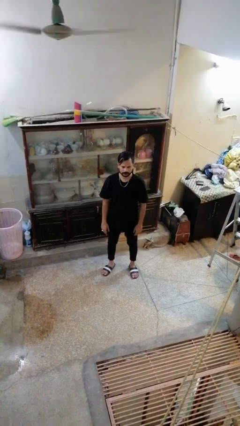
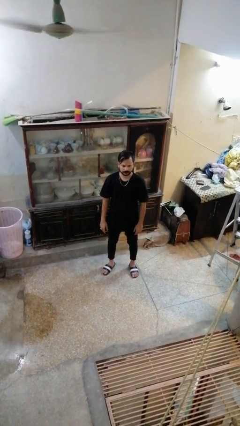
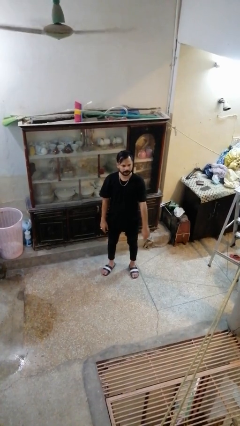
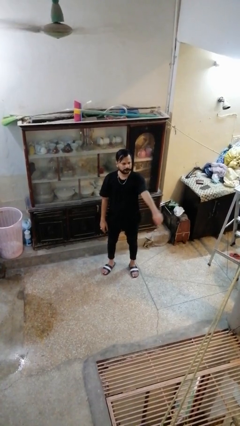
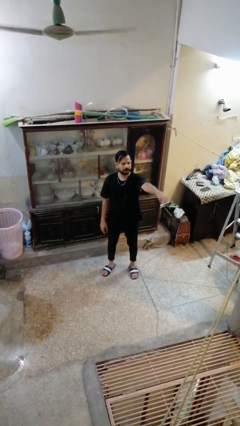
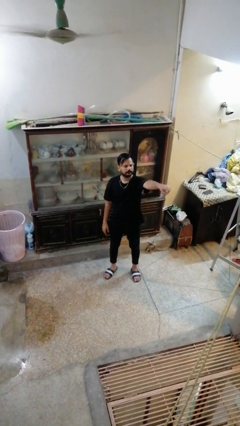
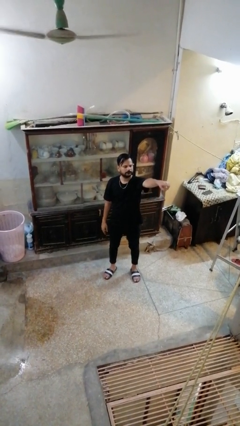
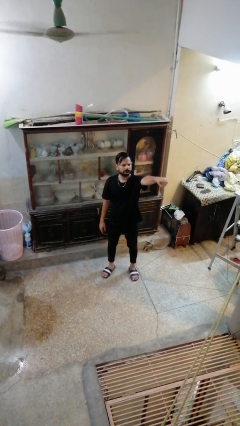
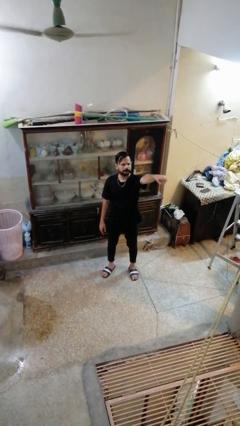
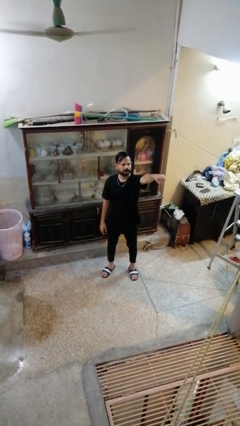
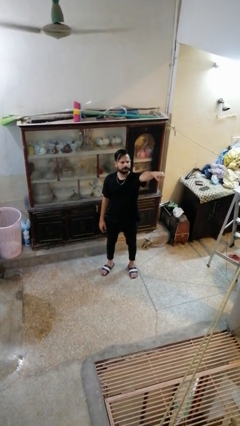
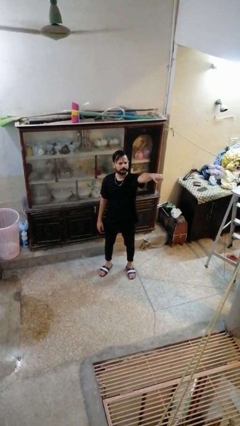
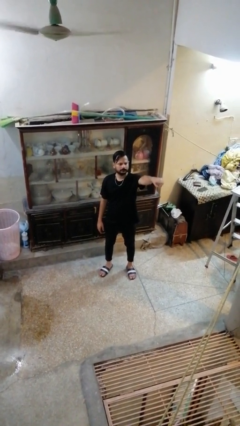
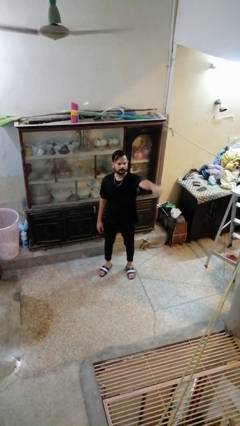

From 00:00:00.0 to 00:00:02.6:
person points at person

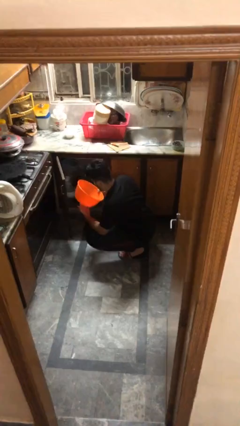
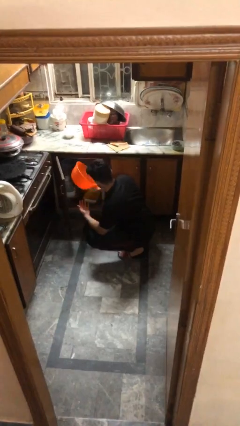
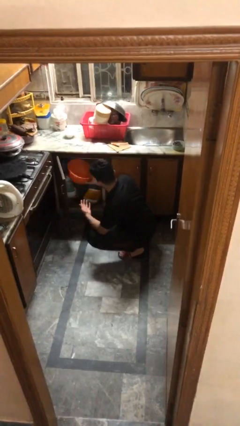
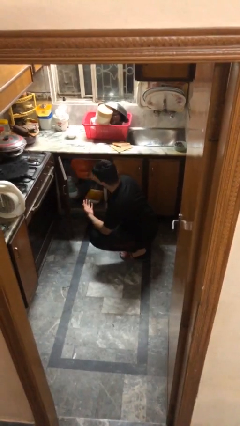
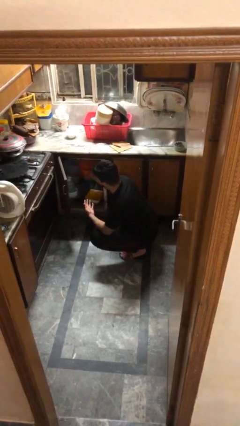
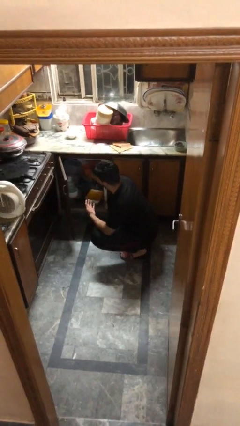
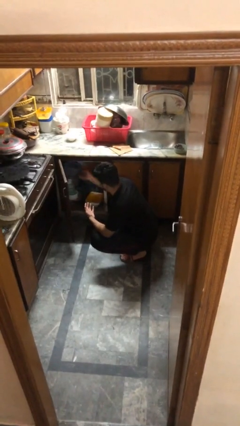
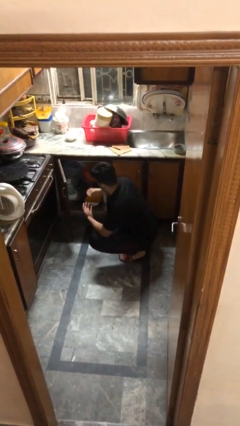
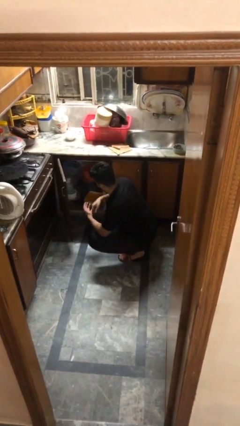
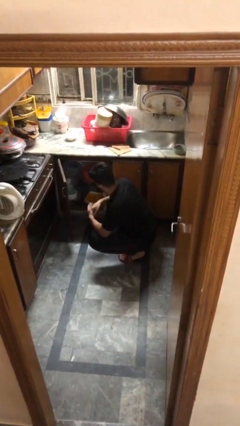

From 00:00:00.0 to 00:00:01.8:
person puts object into kitchen drawer

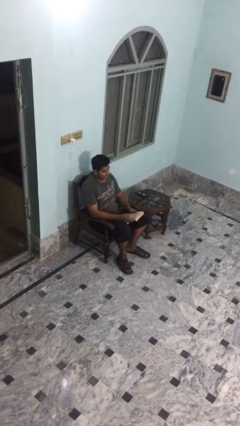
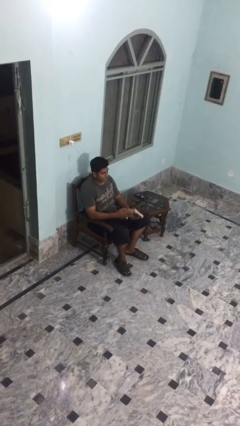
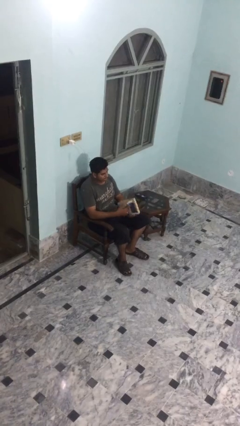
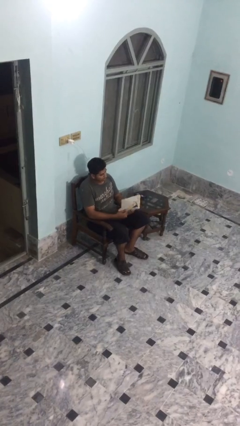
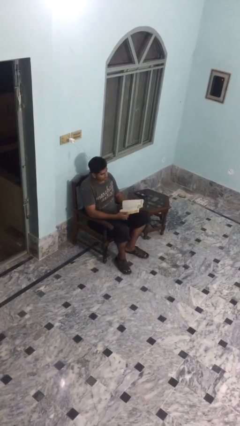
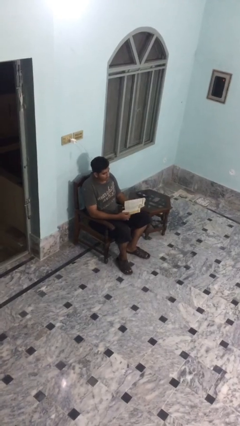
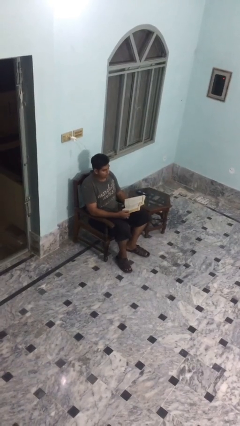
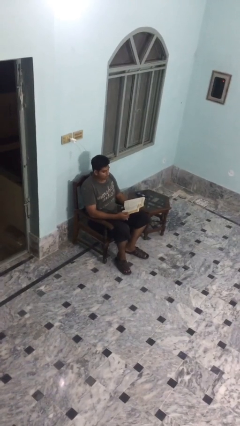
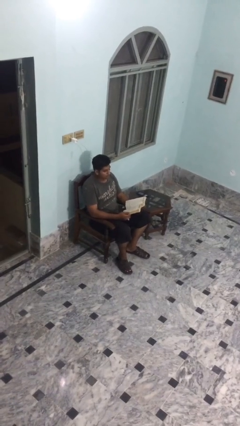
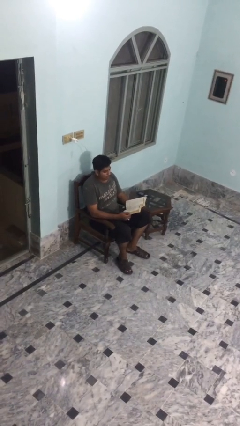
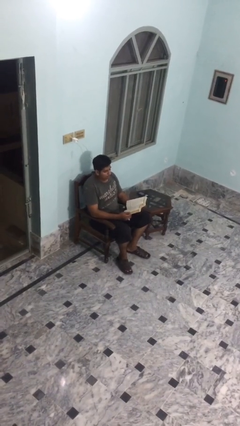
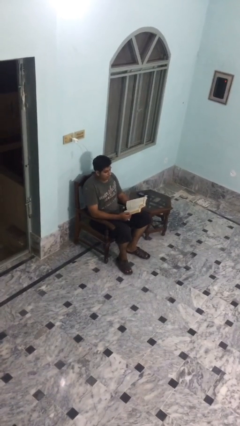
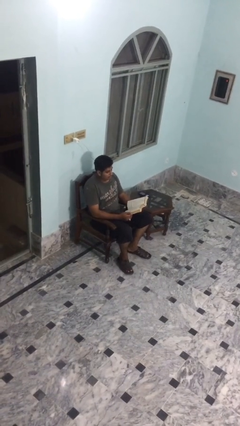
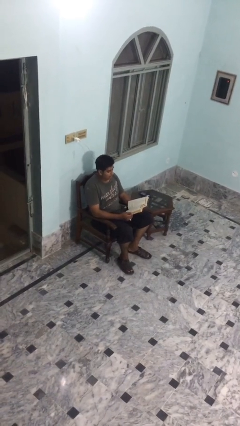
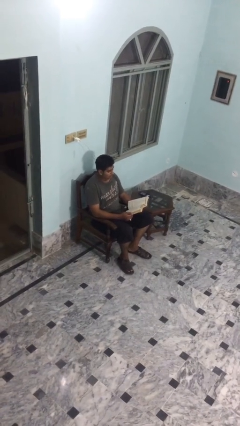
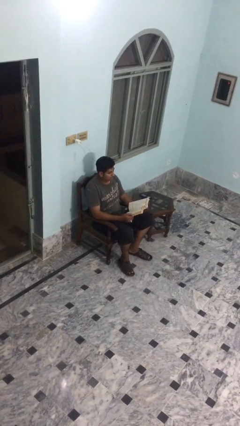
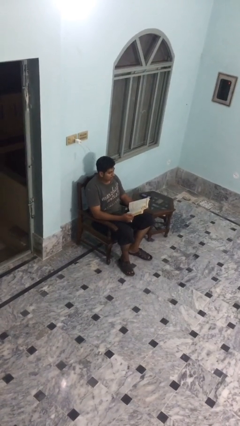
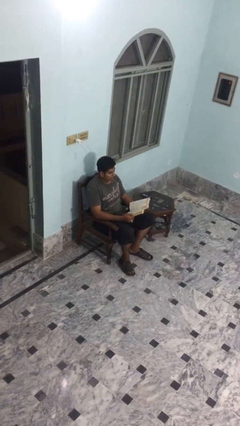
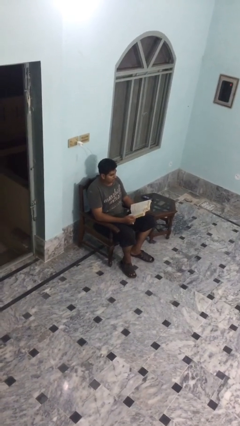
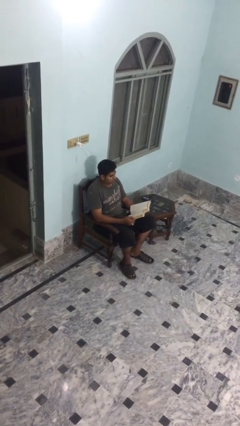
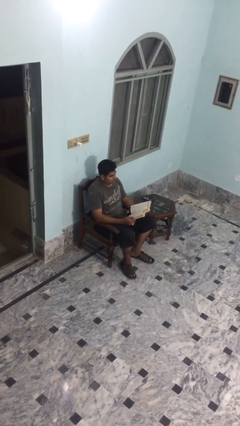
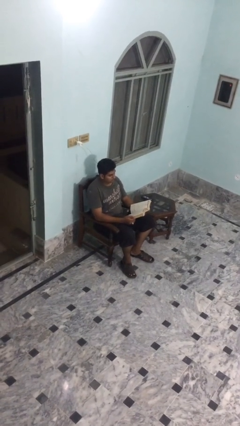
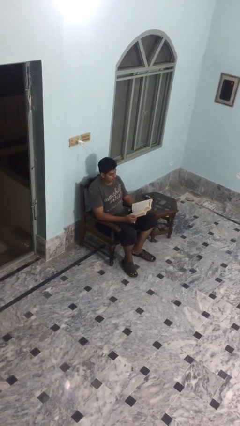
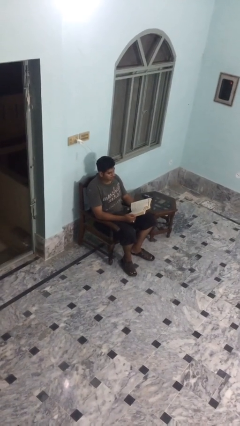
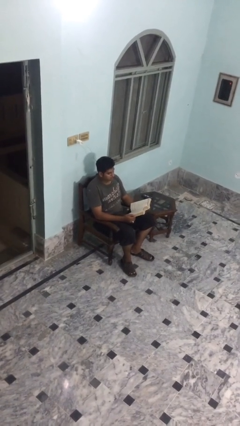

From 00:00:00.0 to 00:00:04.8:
person reads document

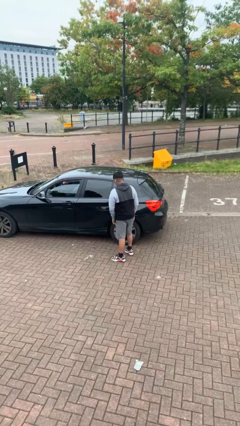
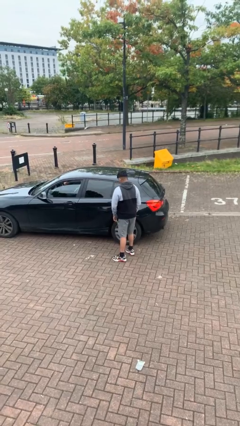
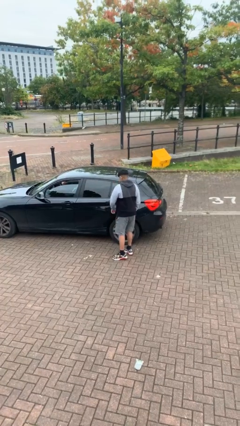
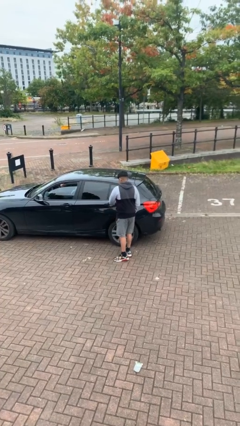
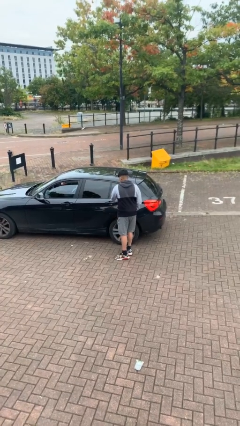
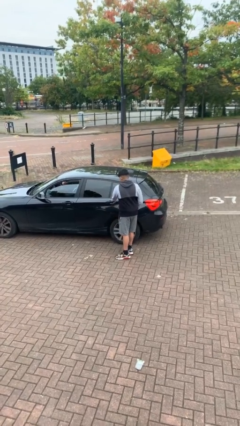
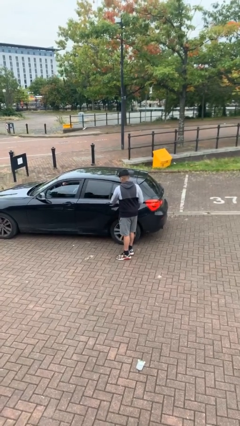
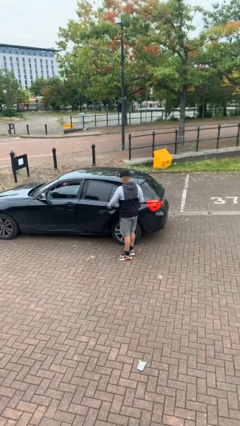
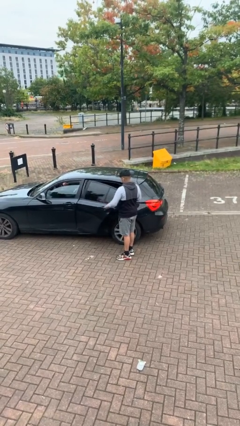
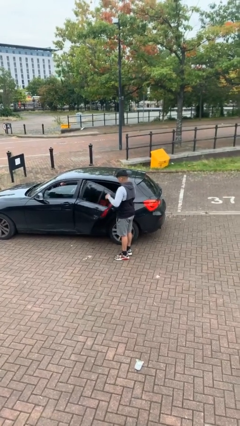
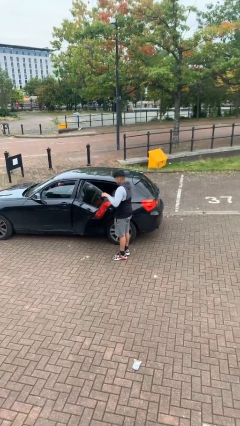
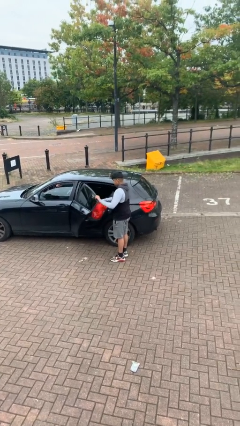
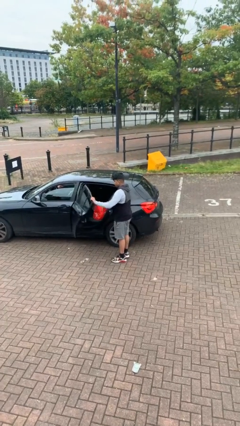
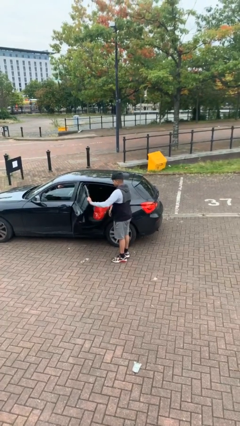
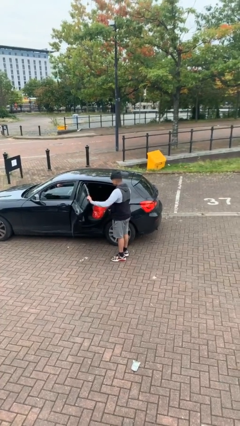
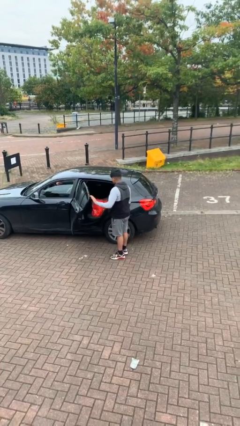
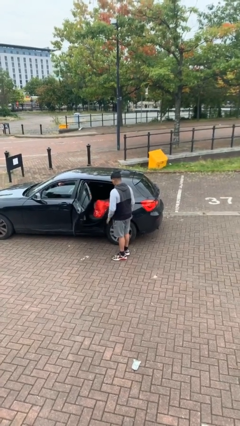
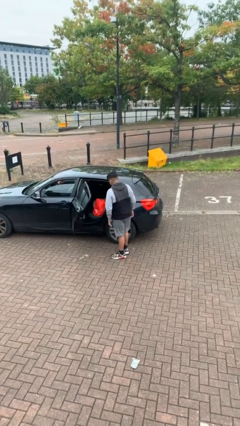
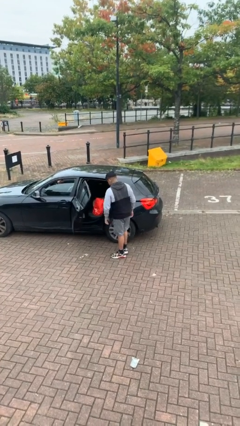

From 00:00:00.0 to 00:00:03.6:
person opens car door

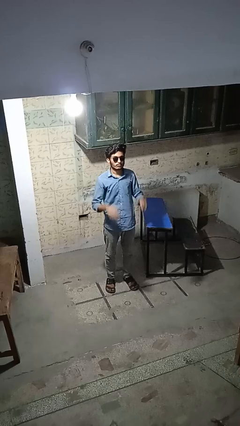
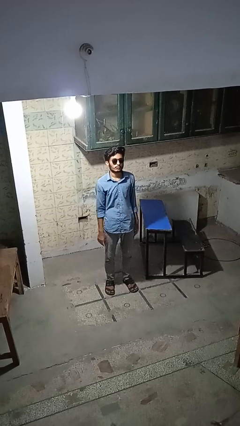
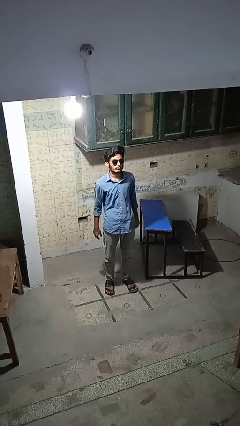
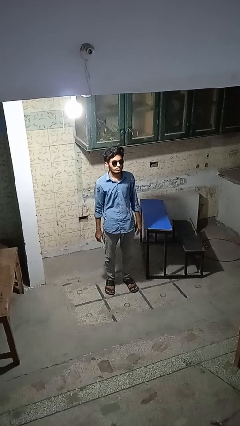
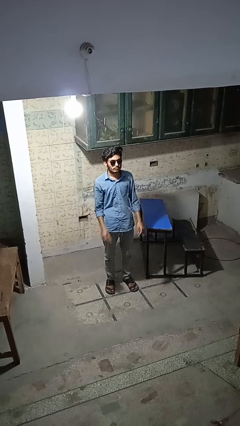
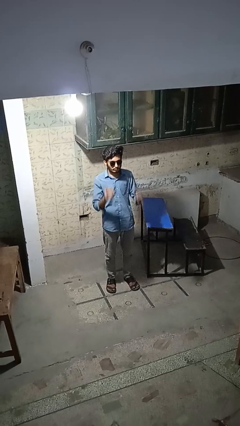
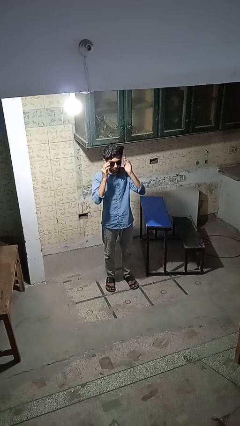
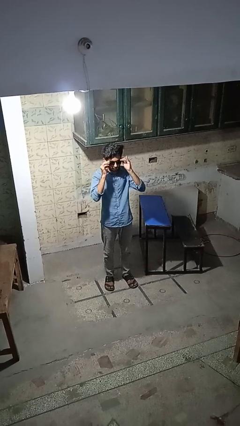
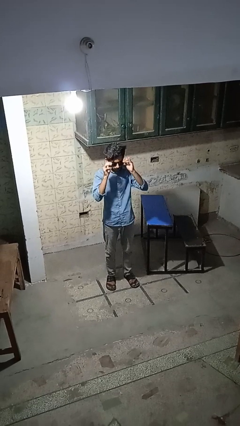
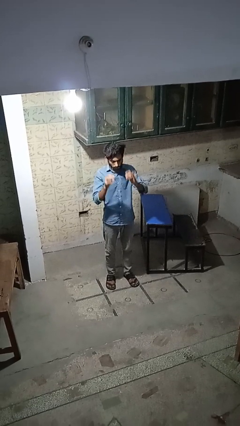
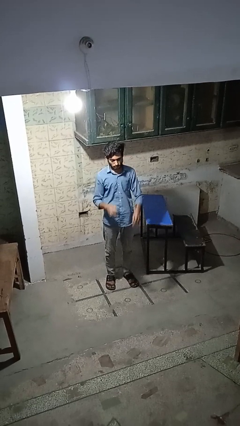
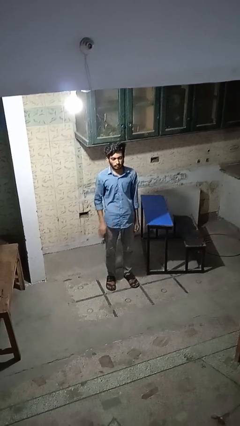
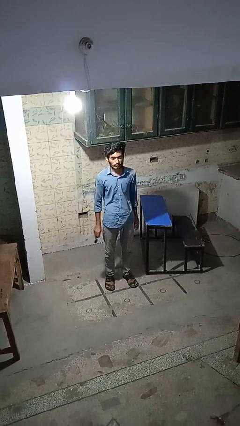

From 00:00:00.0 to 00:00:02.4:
person takes off sunglasses

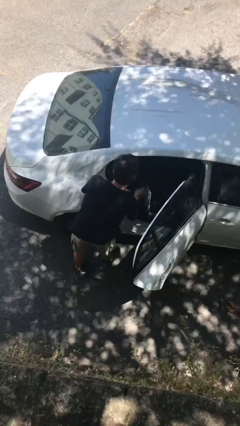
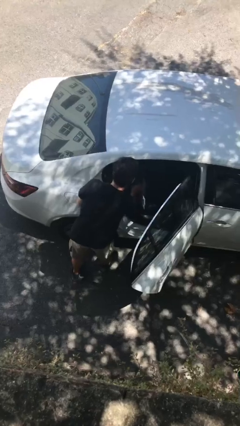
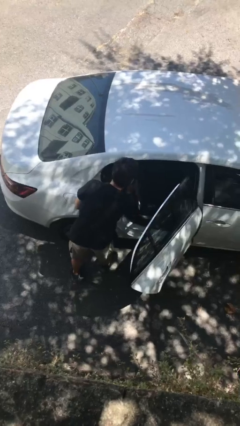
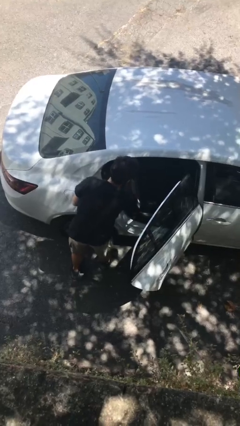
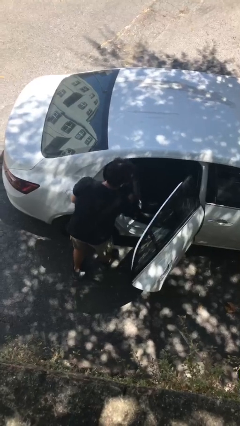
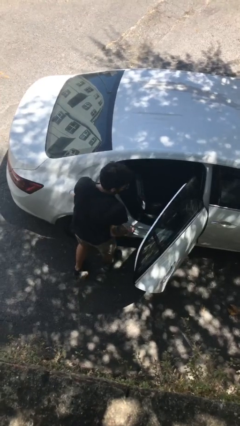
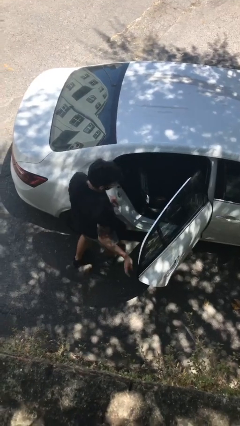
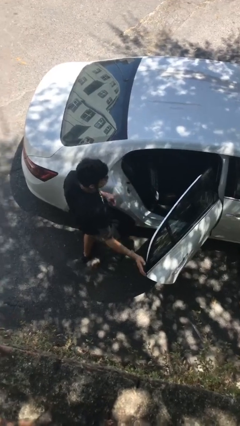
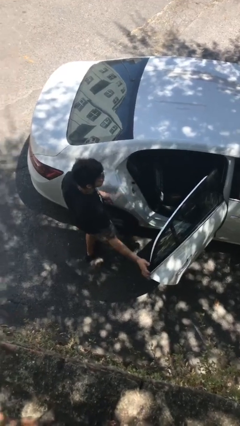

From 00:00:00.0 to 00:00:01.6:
person loads car

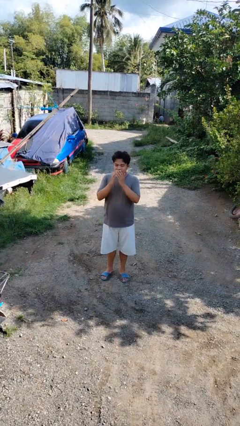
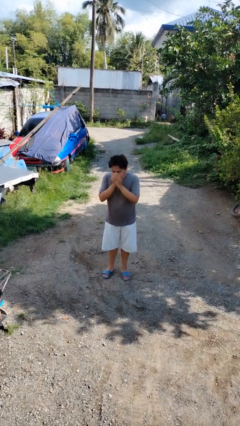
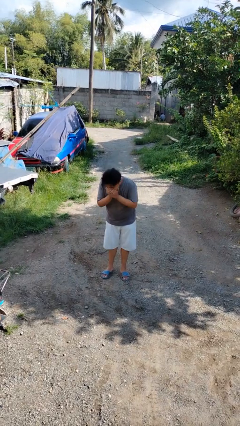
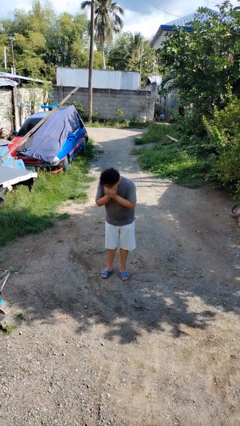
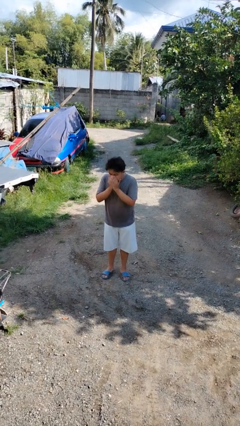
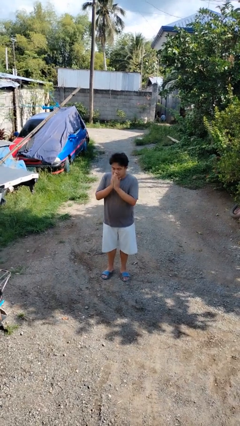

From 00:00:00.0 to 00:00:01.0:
person sneezes into hand
